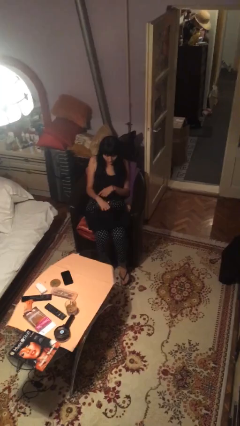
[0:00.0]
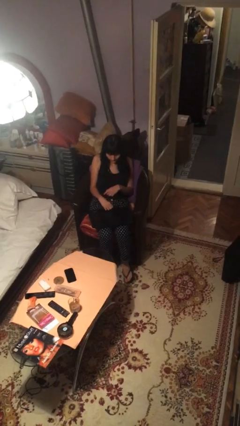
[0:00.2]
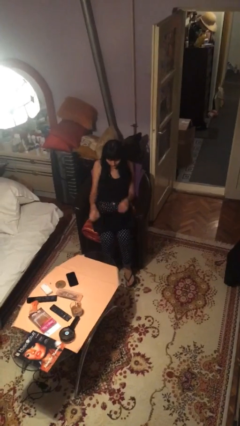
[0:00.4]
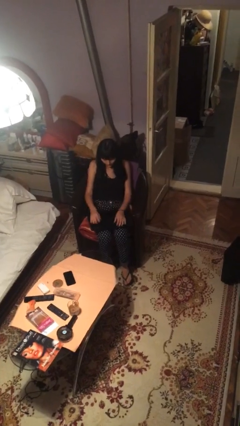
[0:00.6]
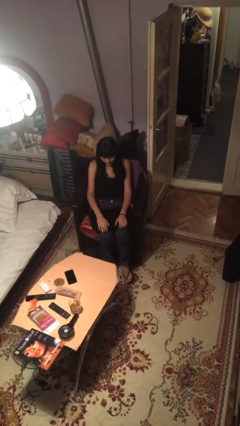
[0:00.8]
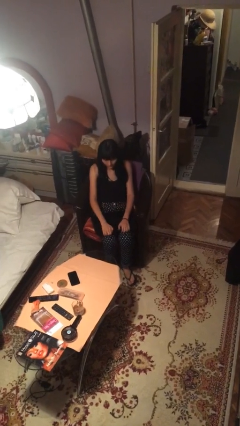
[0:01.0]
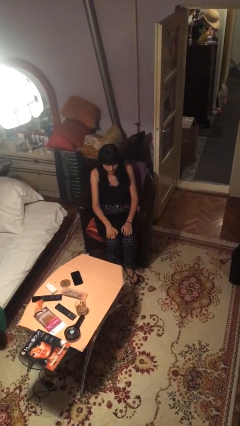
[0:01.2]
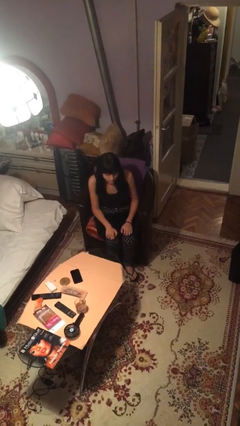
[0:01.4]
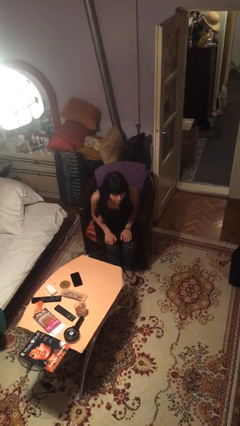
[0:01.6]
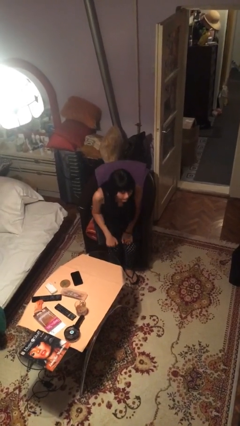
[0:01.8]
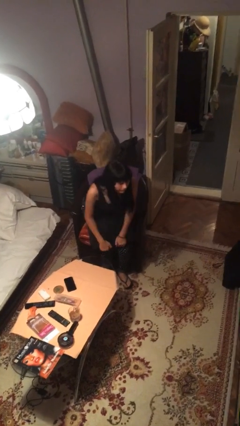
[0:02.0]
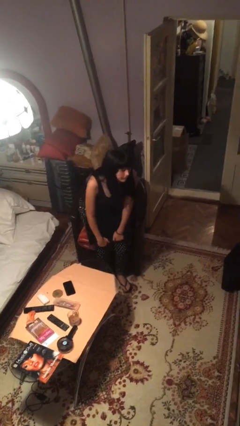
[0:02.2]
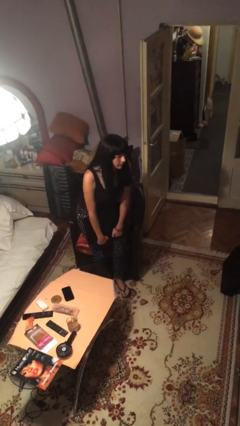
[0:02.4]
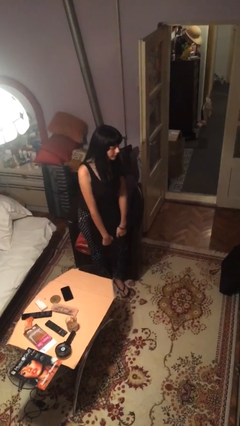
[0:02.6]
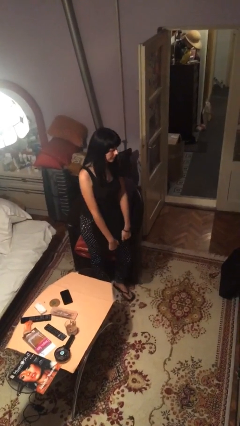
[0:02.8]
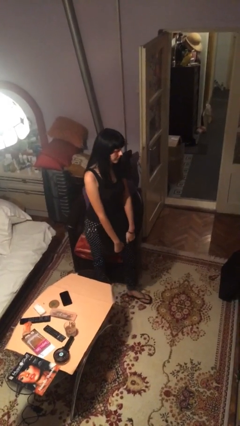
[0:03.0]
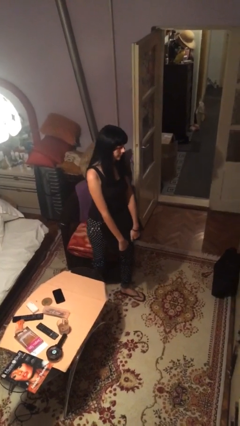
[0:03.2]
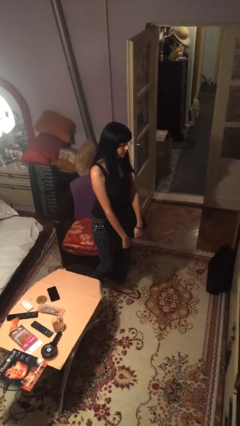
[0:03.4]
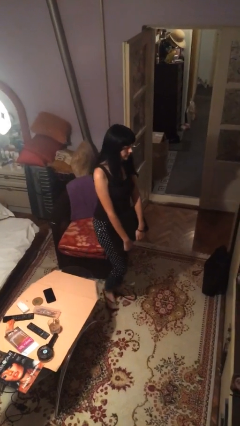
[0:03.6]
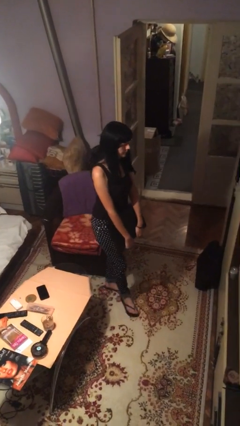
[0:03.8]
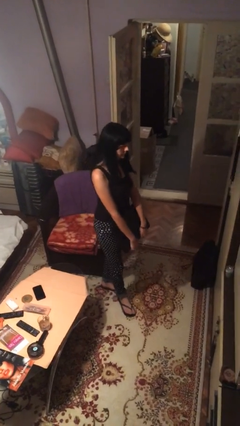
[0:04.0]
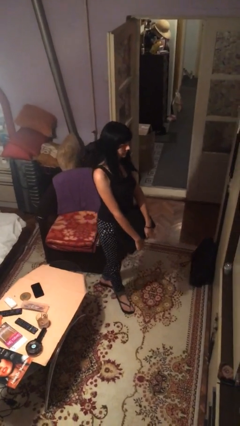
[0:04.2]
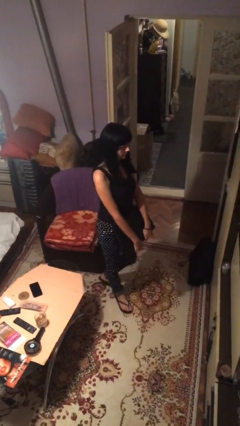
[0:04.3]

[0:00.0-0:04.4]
person stands up

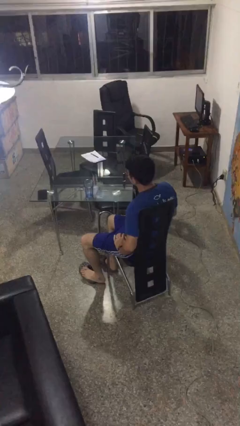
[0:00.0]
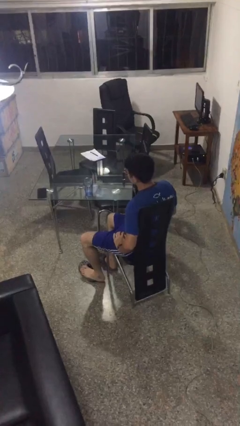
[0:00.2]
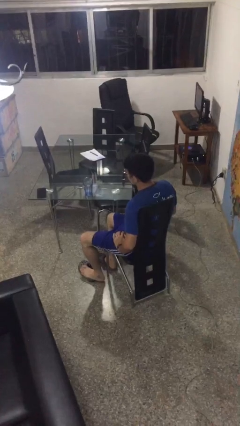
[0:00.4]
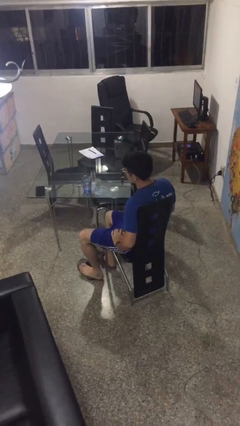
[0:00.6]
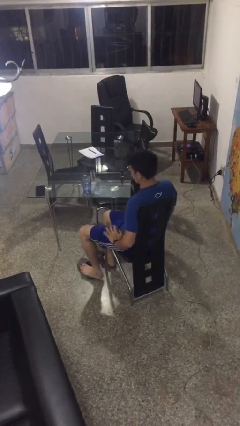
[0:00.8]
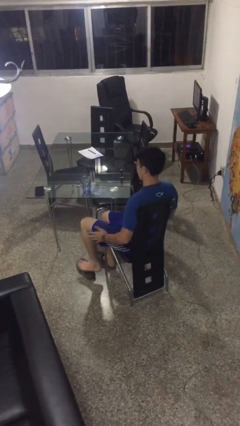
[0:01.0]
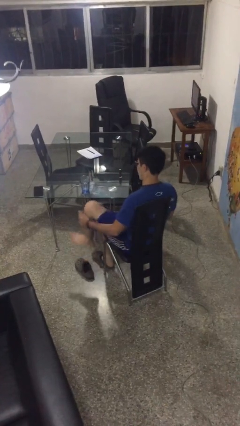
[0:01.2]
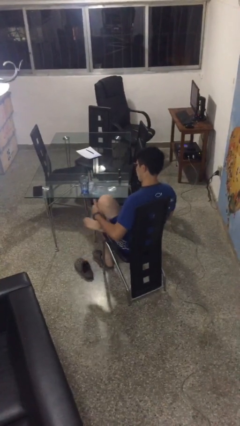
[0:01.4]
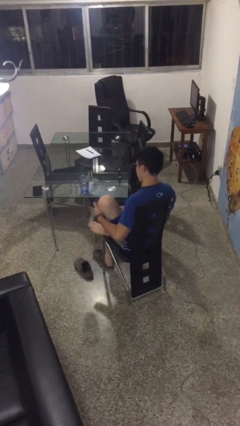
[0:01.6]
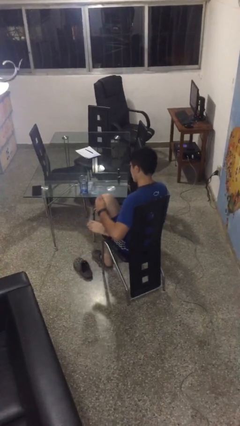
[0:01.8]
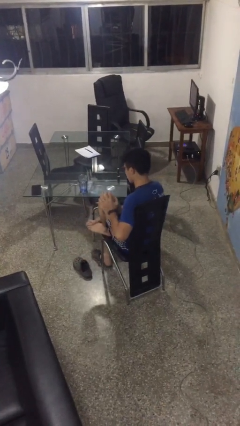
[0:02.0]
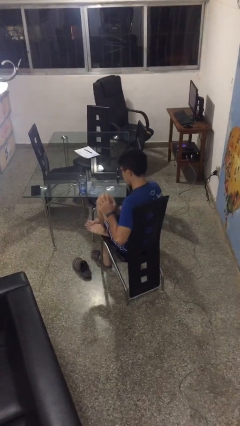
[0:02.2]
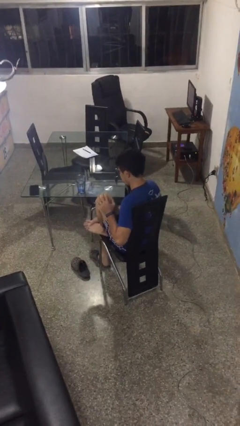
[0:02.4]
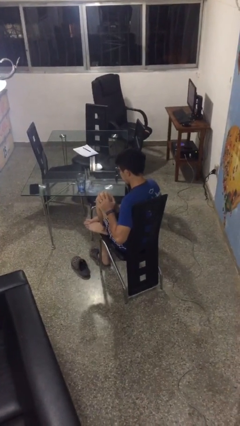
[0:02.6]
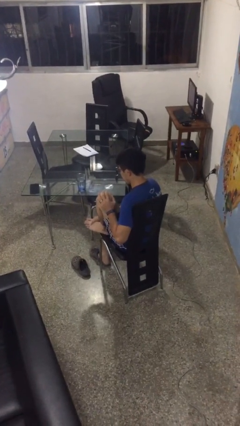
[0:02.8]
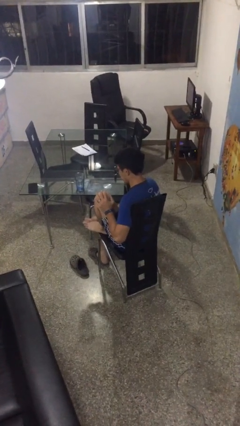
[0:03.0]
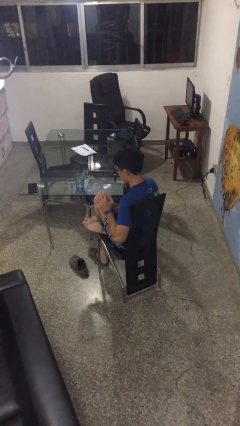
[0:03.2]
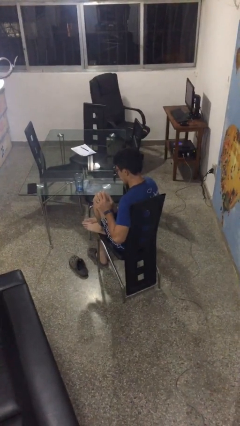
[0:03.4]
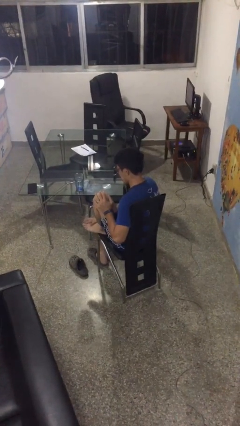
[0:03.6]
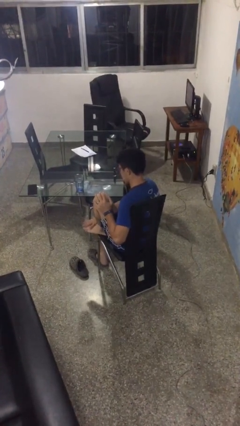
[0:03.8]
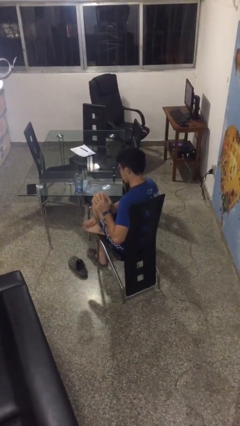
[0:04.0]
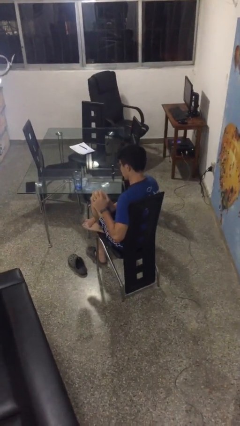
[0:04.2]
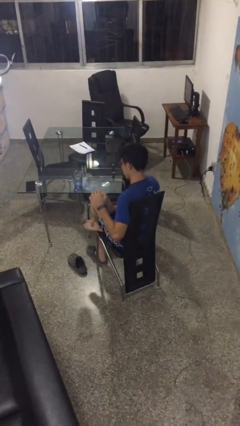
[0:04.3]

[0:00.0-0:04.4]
person rubs foot

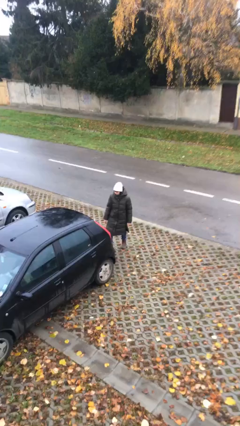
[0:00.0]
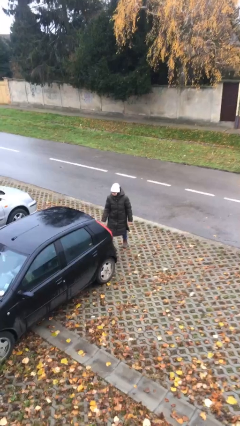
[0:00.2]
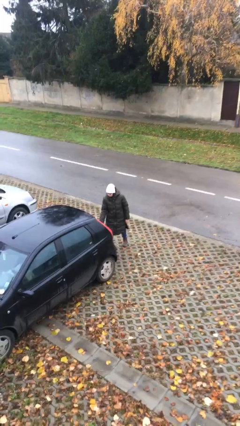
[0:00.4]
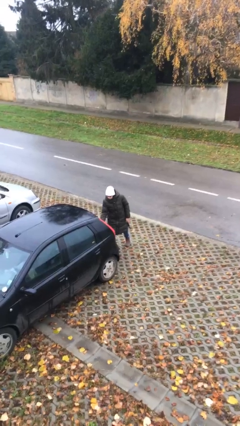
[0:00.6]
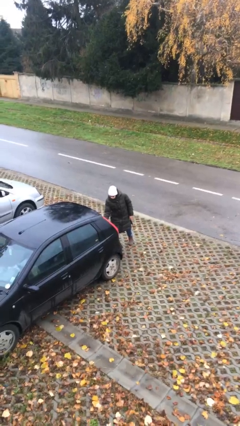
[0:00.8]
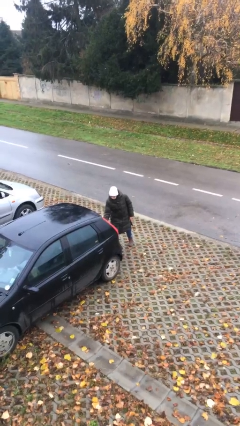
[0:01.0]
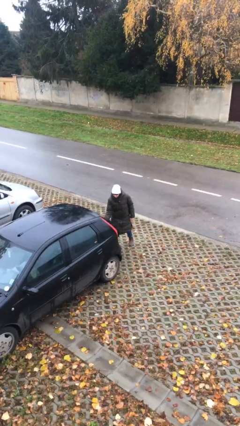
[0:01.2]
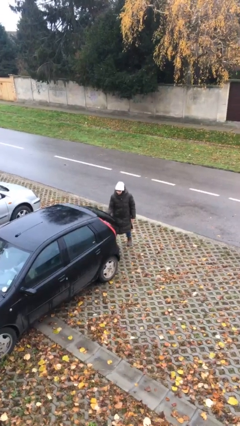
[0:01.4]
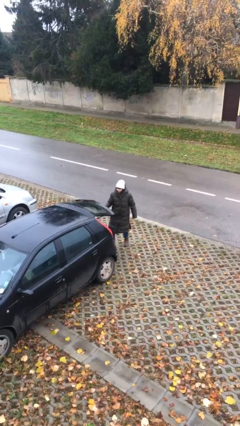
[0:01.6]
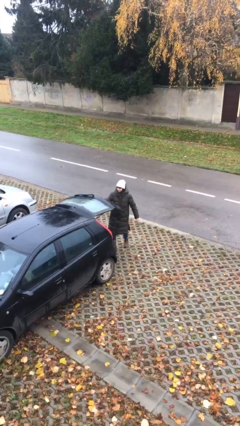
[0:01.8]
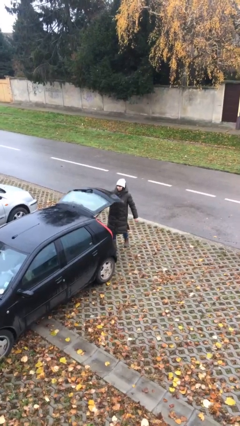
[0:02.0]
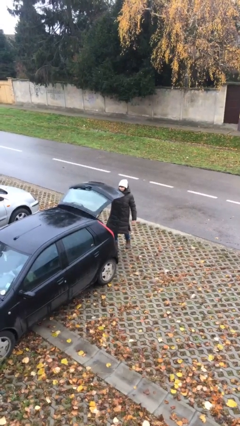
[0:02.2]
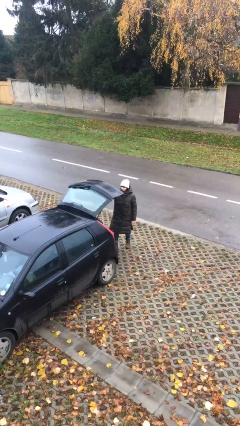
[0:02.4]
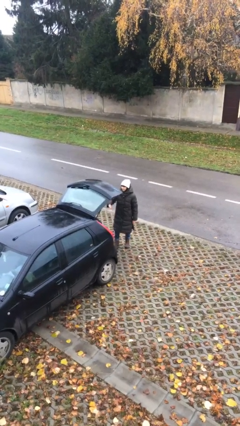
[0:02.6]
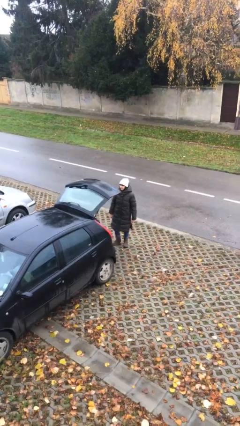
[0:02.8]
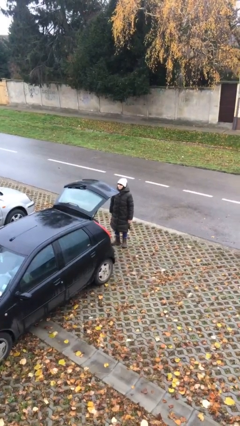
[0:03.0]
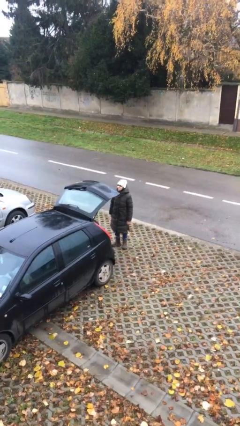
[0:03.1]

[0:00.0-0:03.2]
person opens car trunk

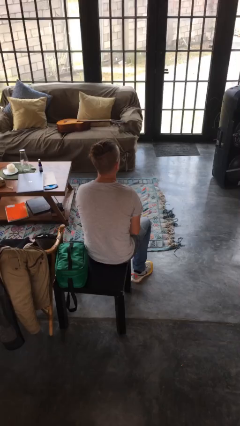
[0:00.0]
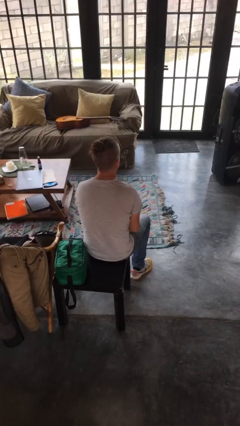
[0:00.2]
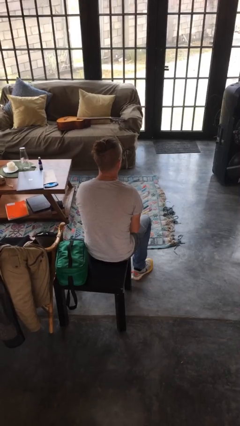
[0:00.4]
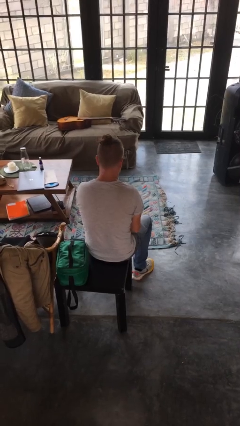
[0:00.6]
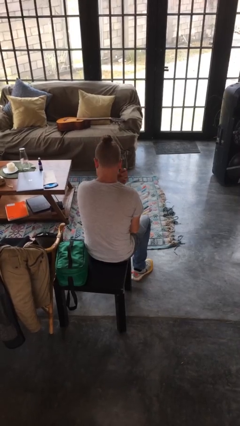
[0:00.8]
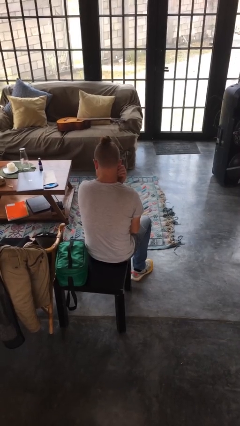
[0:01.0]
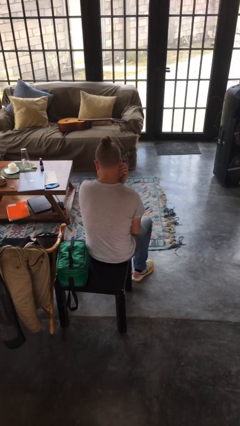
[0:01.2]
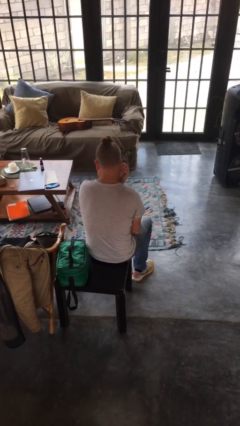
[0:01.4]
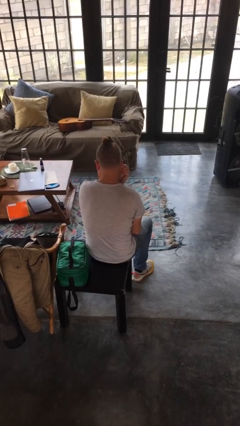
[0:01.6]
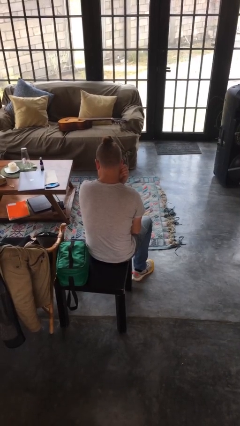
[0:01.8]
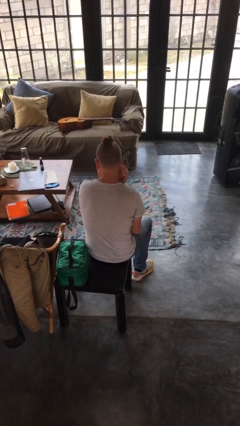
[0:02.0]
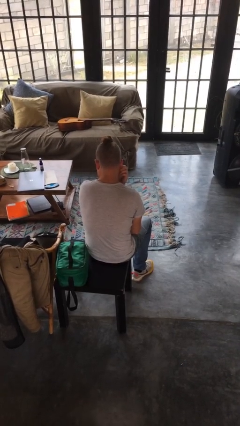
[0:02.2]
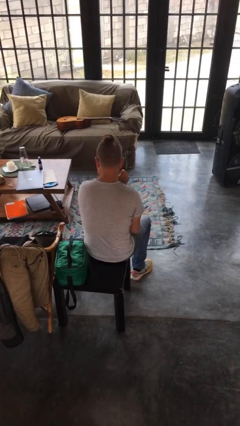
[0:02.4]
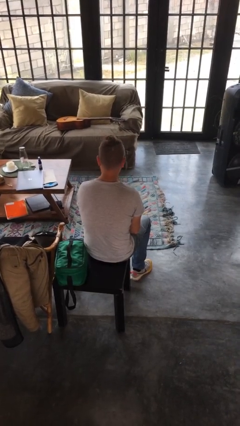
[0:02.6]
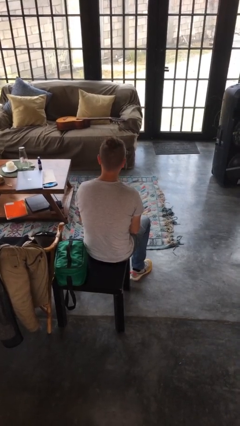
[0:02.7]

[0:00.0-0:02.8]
person touches earlobe

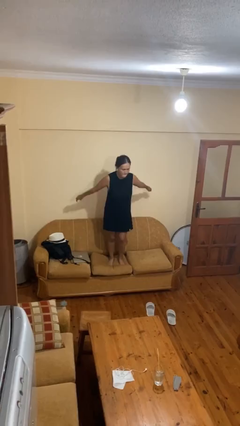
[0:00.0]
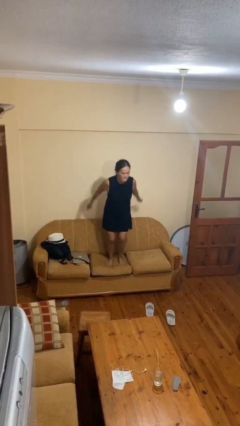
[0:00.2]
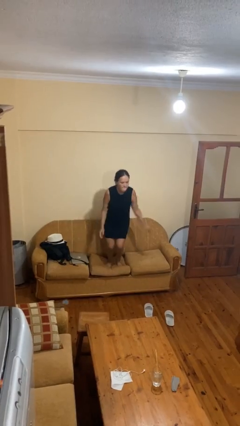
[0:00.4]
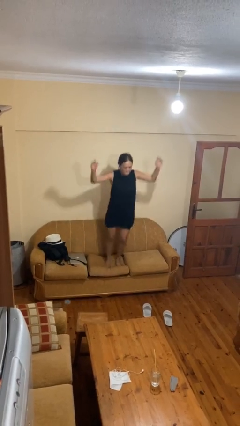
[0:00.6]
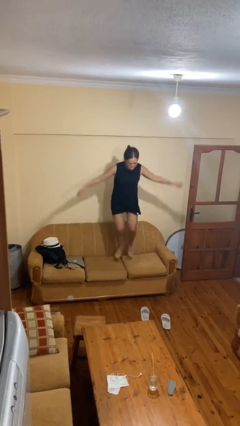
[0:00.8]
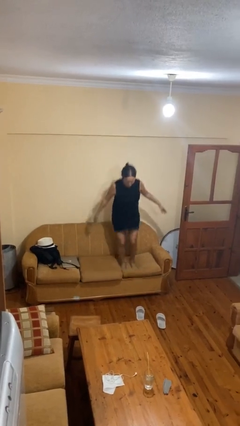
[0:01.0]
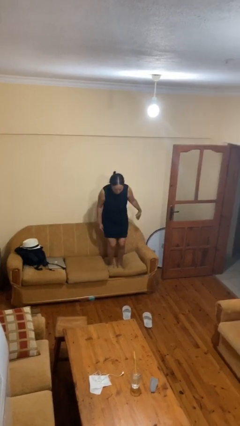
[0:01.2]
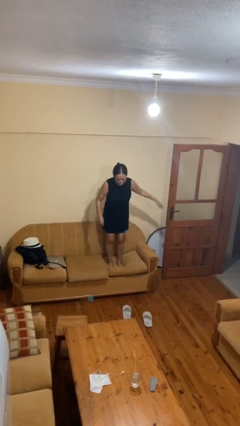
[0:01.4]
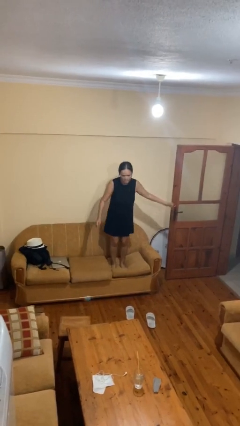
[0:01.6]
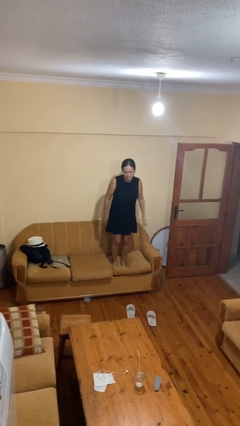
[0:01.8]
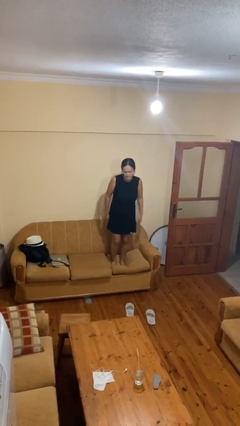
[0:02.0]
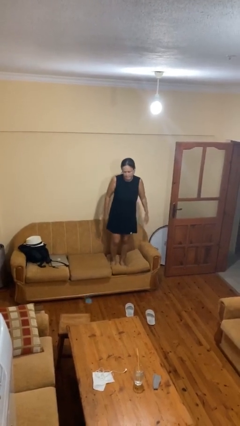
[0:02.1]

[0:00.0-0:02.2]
person jumps on couch

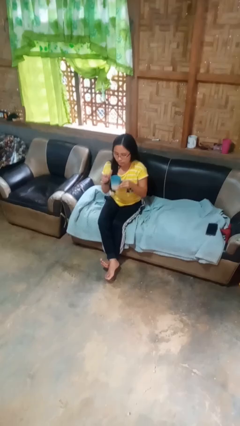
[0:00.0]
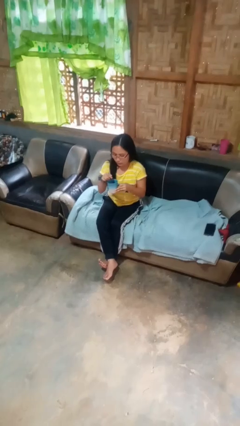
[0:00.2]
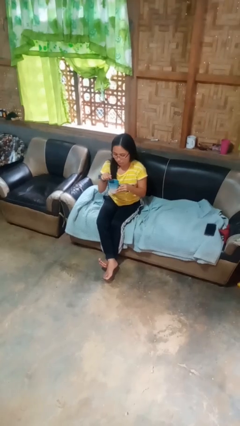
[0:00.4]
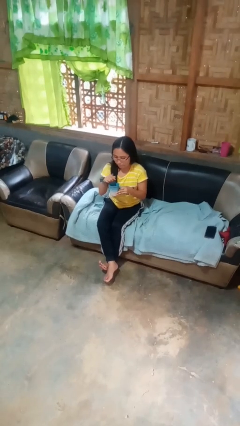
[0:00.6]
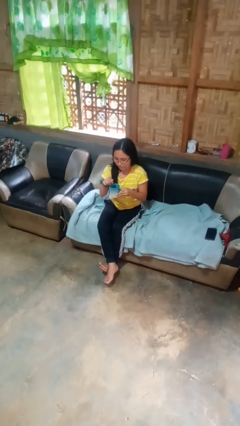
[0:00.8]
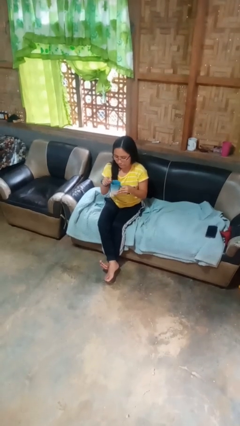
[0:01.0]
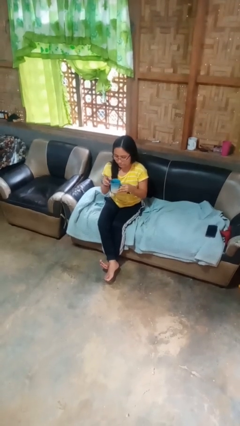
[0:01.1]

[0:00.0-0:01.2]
person stirs mug
